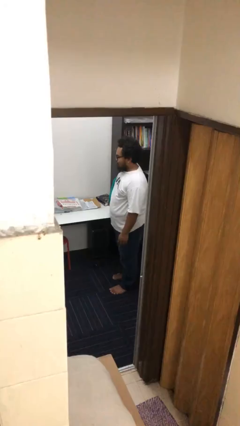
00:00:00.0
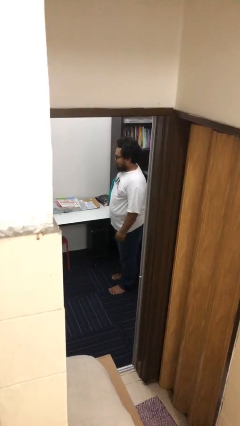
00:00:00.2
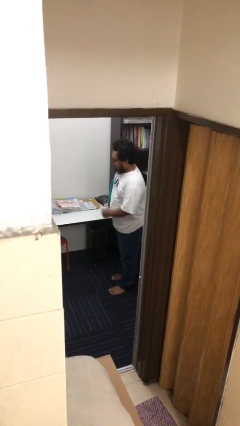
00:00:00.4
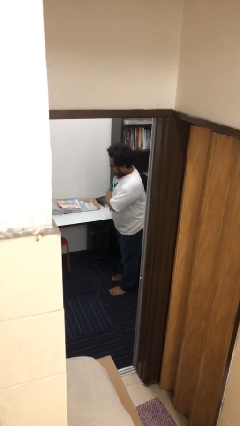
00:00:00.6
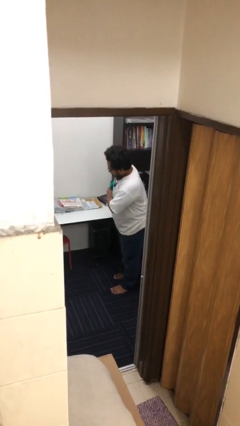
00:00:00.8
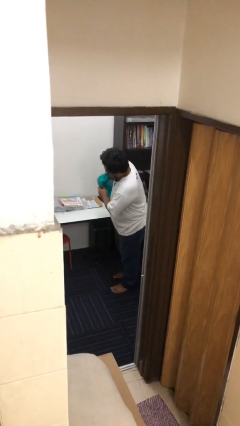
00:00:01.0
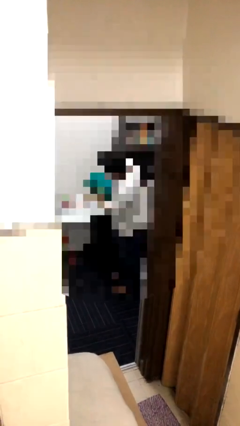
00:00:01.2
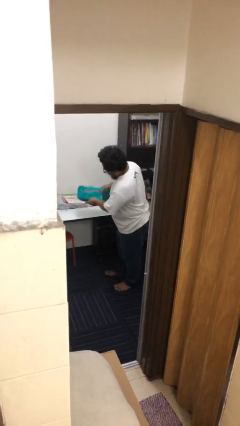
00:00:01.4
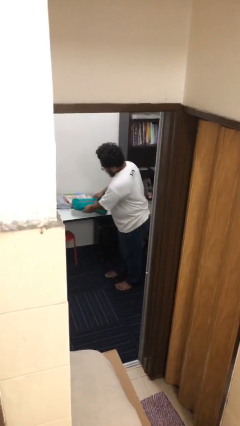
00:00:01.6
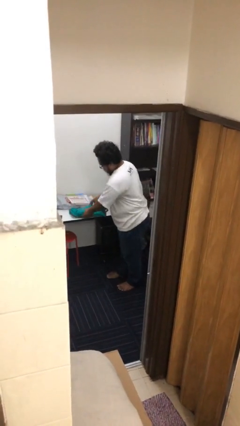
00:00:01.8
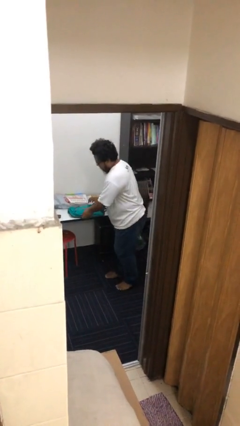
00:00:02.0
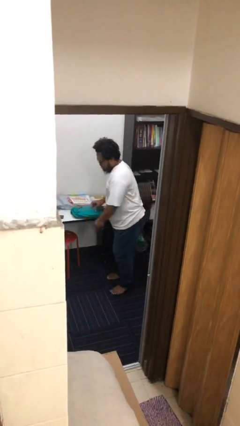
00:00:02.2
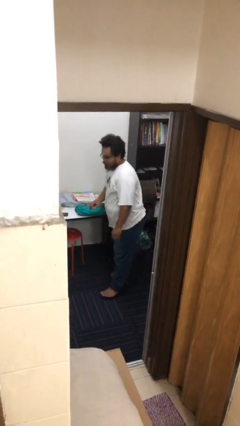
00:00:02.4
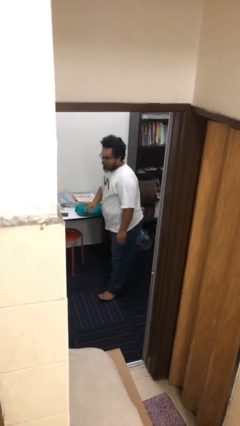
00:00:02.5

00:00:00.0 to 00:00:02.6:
person puts down object on table

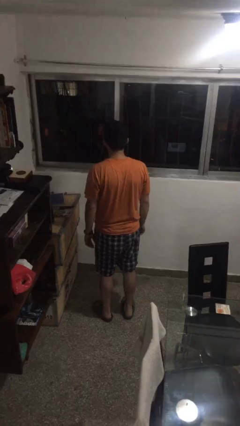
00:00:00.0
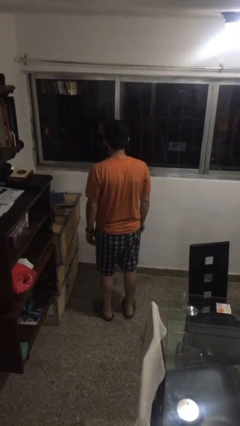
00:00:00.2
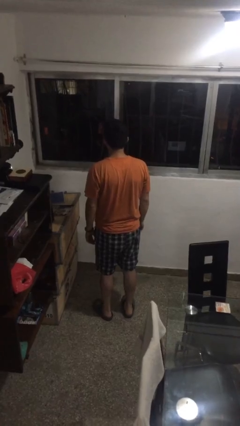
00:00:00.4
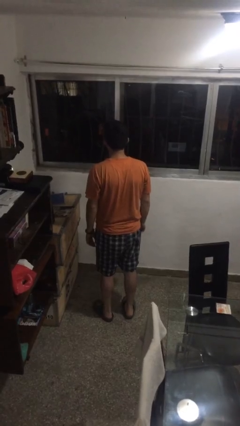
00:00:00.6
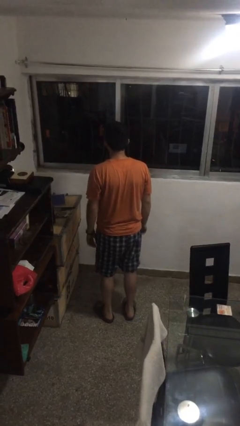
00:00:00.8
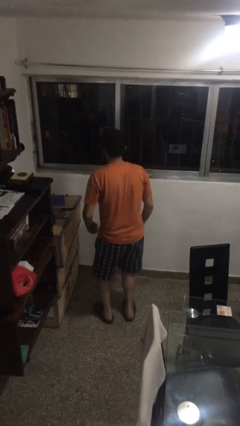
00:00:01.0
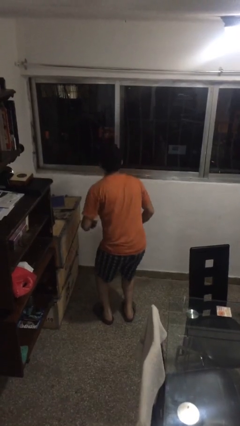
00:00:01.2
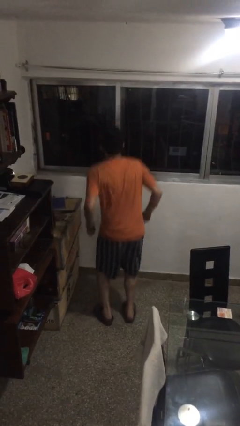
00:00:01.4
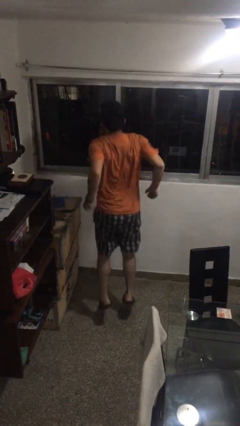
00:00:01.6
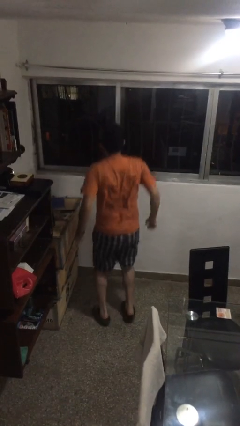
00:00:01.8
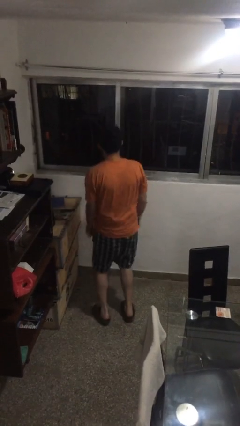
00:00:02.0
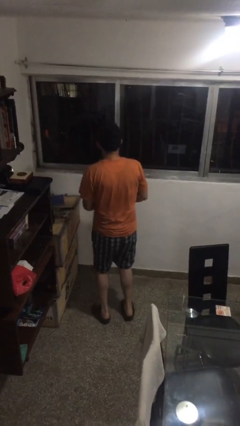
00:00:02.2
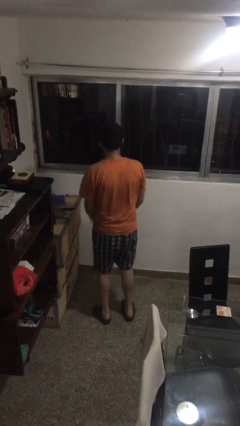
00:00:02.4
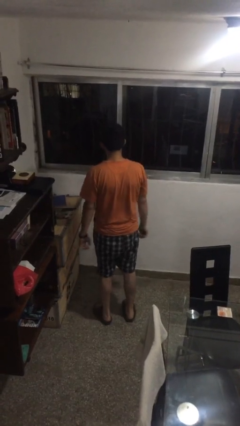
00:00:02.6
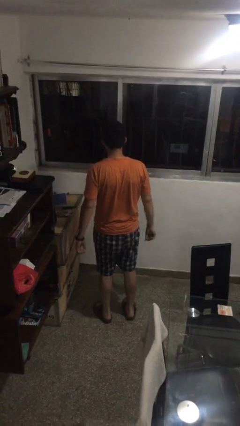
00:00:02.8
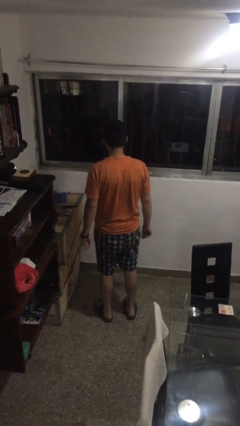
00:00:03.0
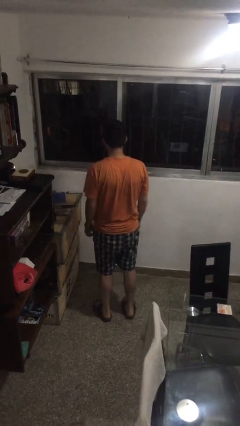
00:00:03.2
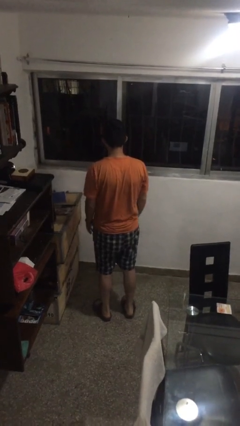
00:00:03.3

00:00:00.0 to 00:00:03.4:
person jumps

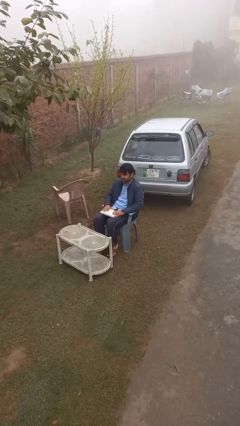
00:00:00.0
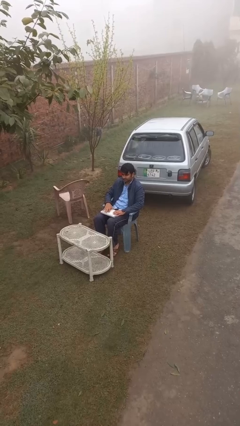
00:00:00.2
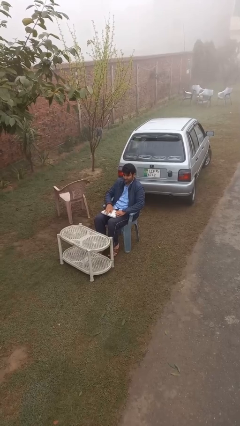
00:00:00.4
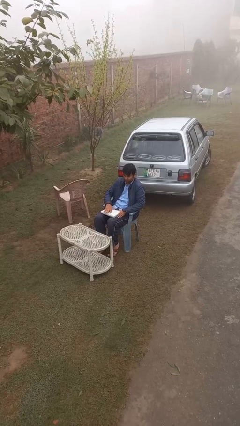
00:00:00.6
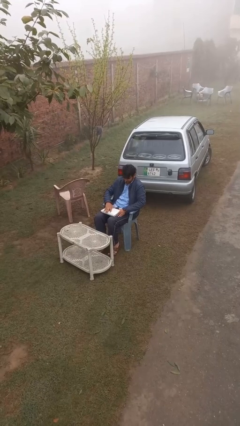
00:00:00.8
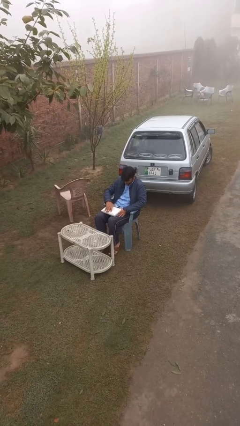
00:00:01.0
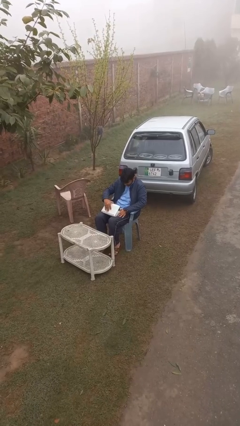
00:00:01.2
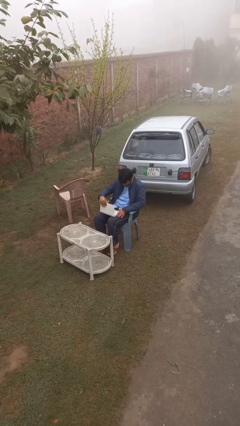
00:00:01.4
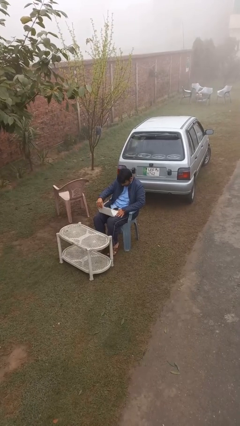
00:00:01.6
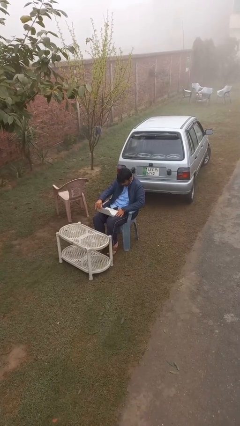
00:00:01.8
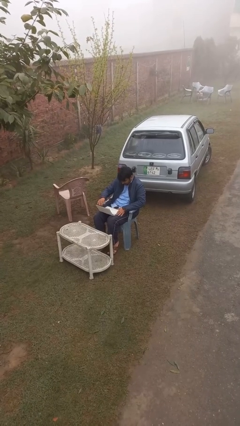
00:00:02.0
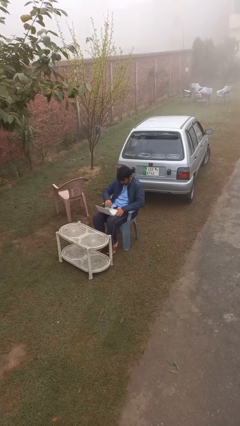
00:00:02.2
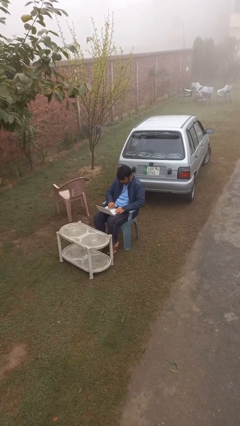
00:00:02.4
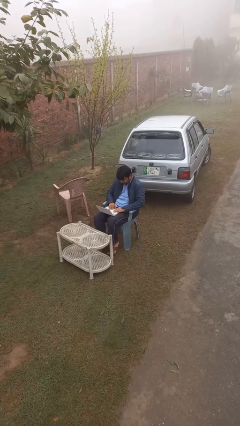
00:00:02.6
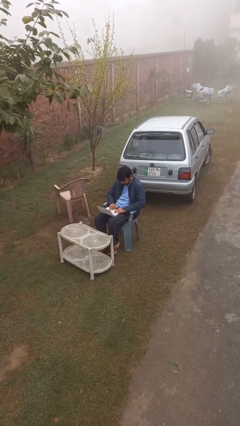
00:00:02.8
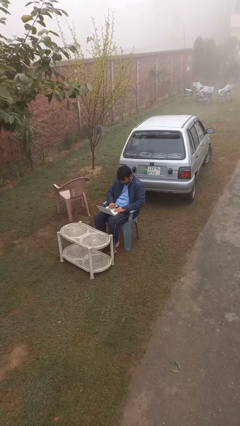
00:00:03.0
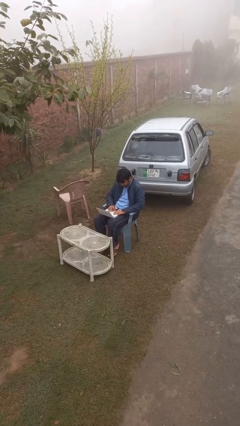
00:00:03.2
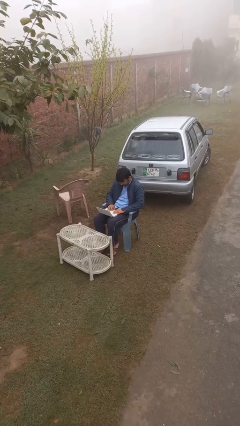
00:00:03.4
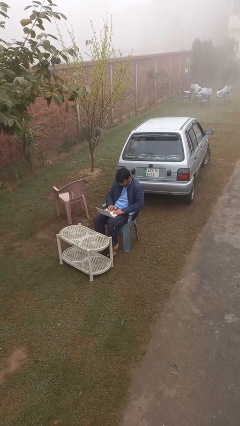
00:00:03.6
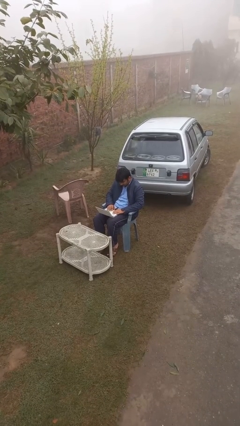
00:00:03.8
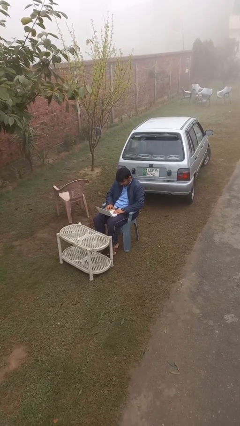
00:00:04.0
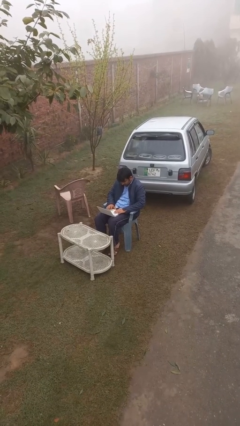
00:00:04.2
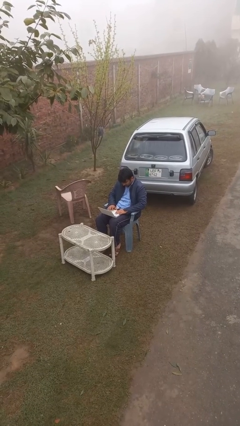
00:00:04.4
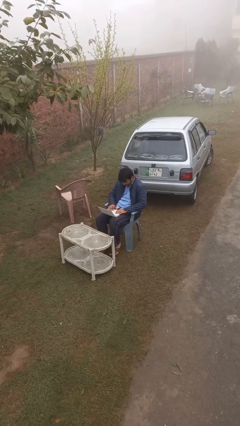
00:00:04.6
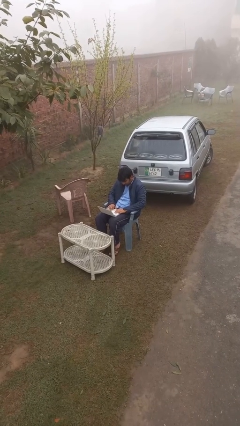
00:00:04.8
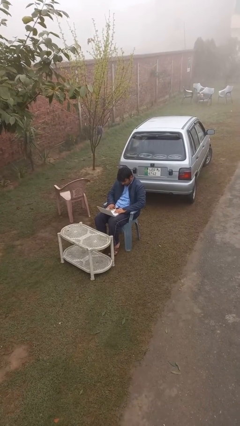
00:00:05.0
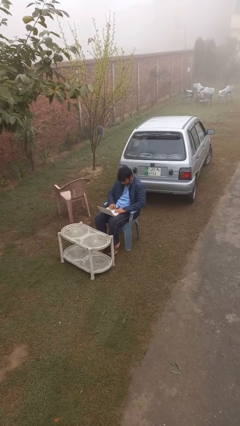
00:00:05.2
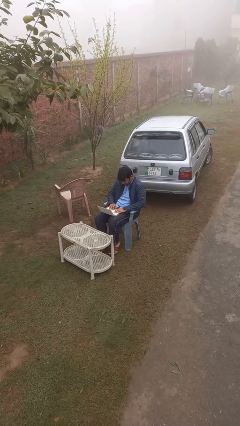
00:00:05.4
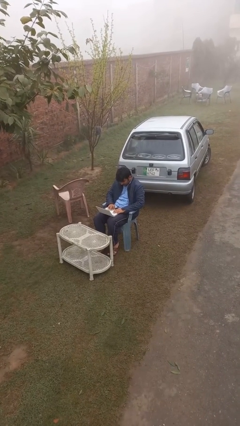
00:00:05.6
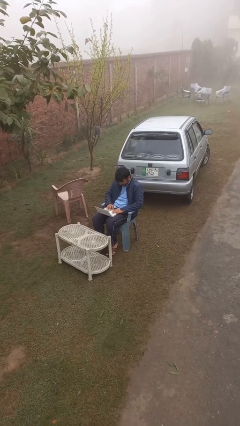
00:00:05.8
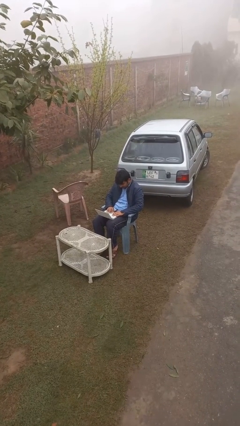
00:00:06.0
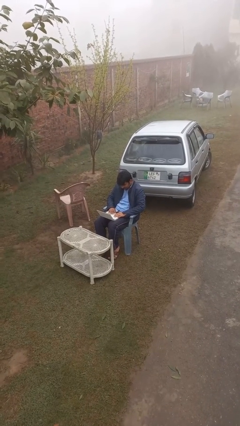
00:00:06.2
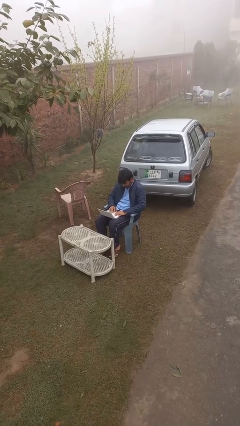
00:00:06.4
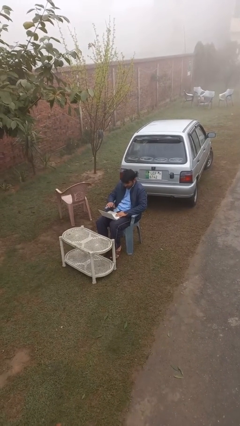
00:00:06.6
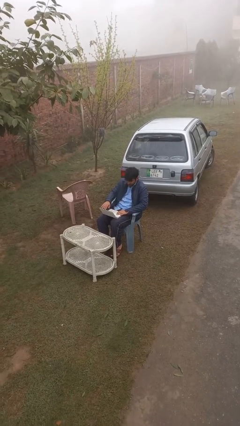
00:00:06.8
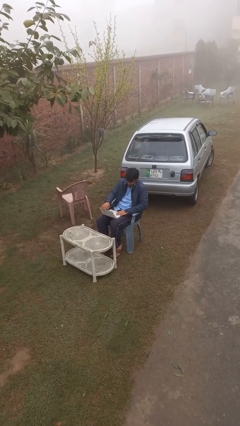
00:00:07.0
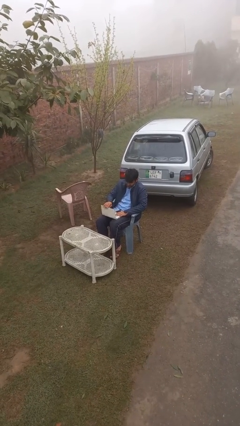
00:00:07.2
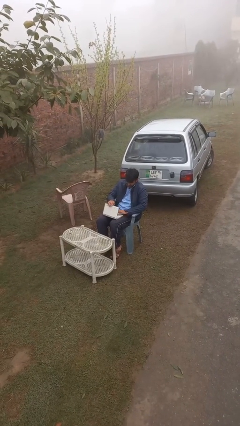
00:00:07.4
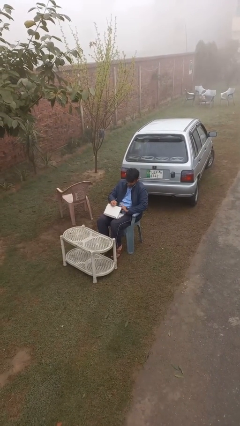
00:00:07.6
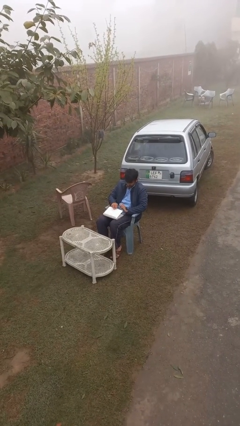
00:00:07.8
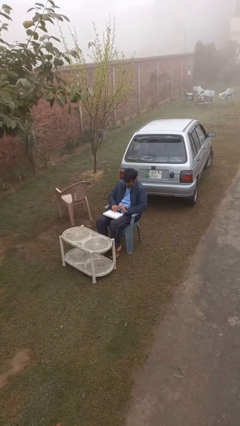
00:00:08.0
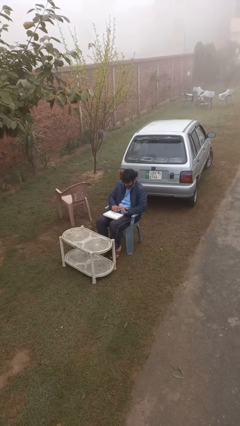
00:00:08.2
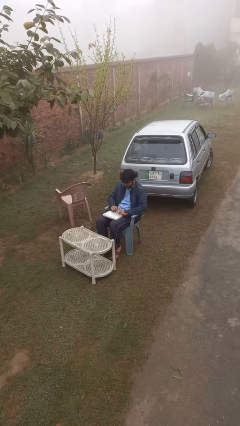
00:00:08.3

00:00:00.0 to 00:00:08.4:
person interacts with laptop

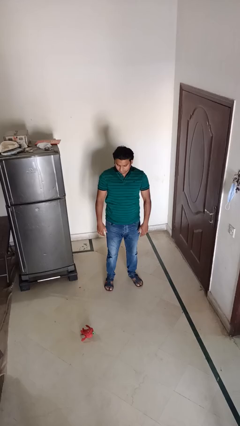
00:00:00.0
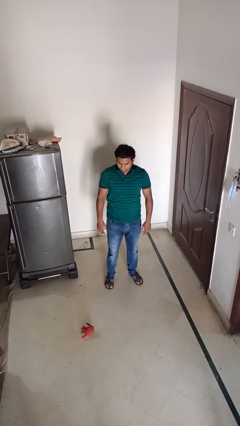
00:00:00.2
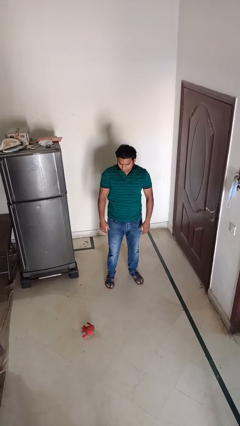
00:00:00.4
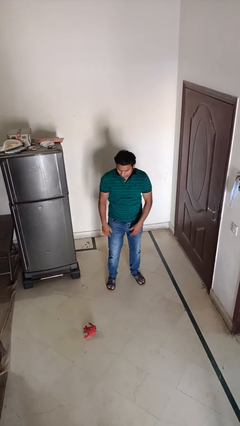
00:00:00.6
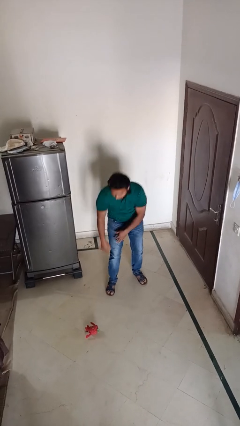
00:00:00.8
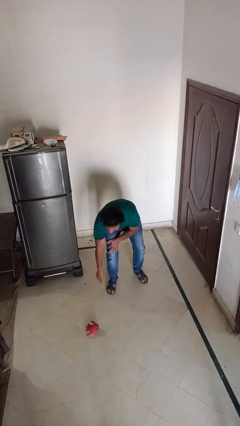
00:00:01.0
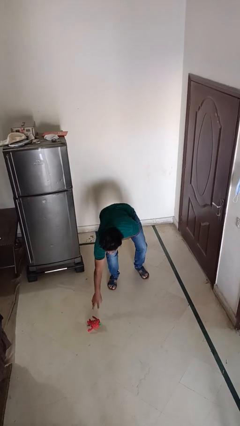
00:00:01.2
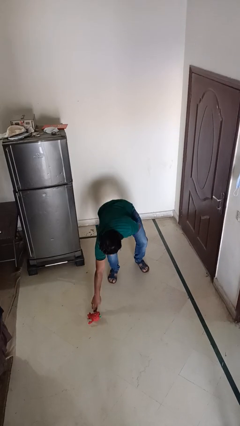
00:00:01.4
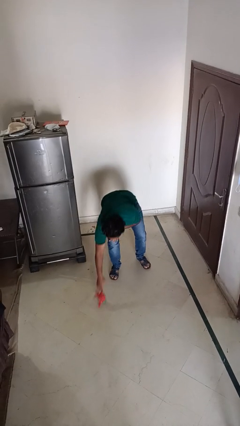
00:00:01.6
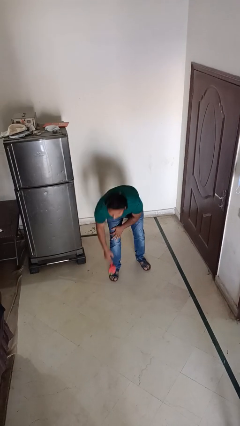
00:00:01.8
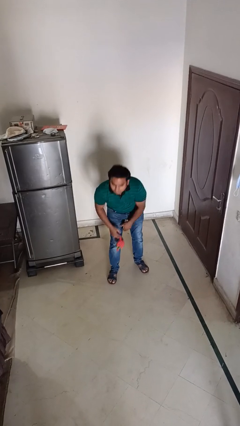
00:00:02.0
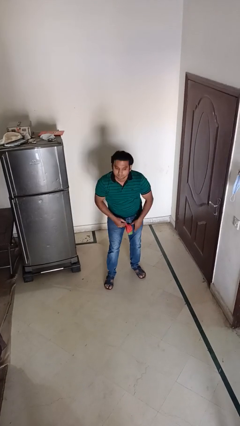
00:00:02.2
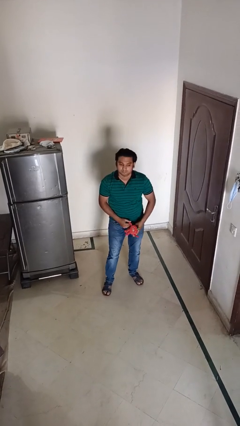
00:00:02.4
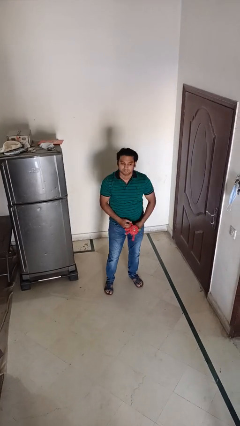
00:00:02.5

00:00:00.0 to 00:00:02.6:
person picks up object from floor

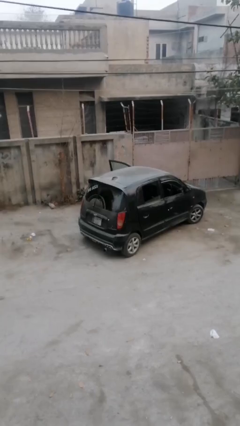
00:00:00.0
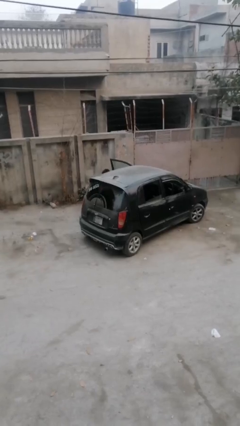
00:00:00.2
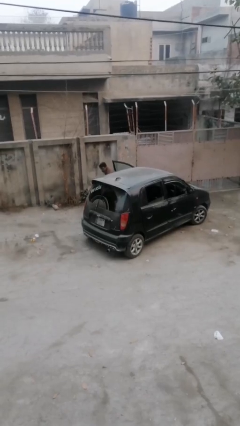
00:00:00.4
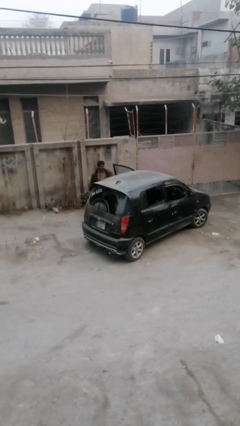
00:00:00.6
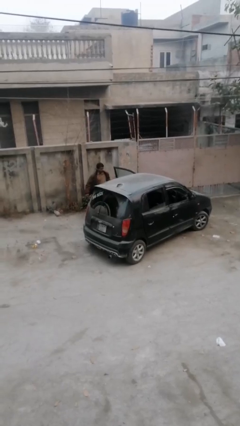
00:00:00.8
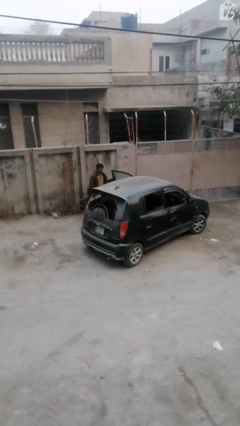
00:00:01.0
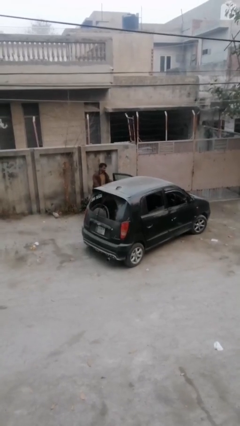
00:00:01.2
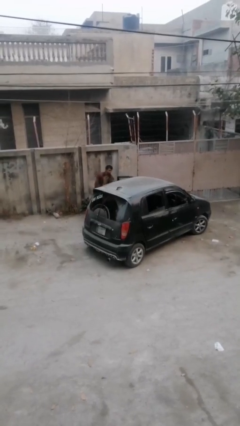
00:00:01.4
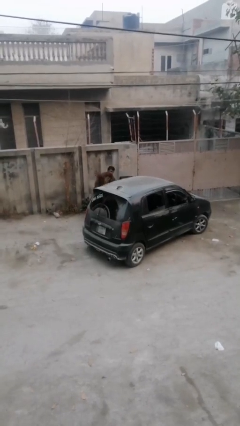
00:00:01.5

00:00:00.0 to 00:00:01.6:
car drops off person
